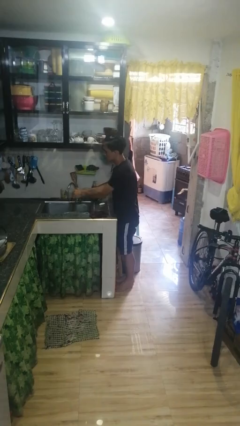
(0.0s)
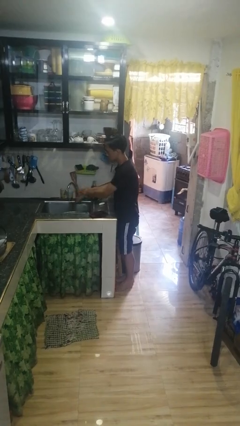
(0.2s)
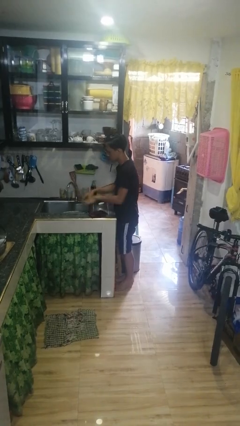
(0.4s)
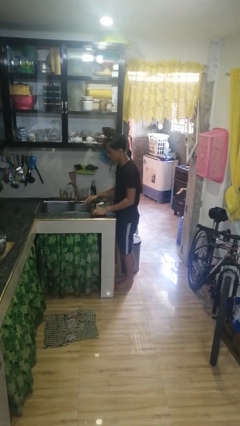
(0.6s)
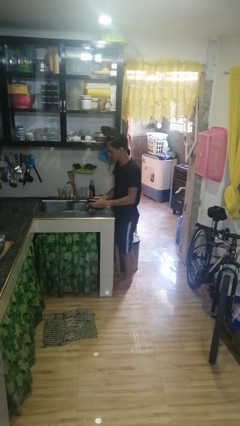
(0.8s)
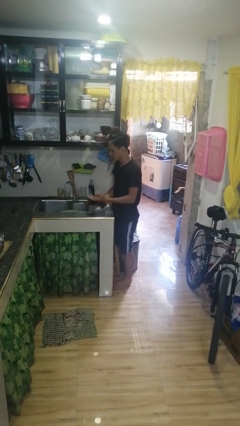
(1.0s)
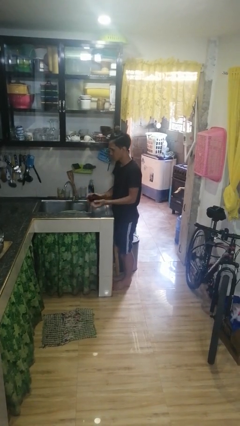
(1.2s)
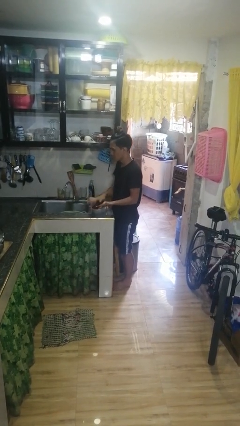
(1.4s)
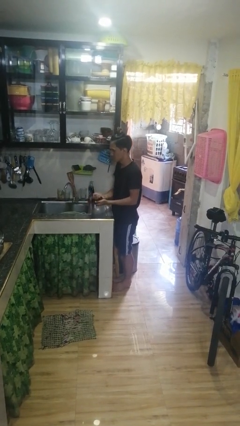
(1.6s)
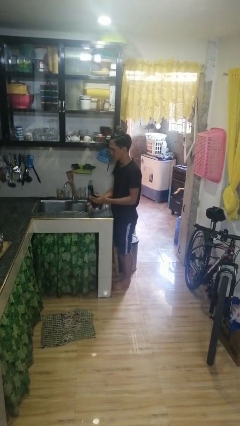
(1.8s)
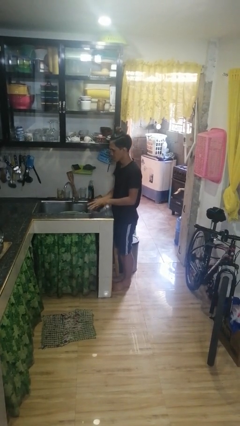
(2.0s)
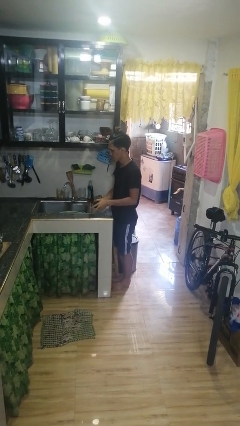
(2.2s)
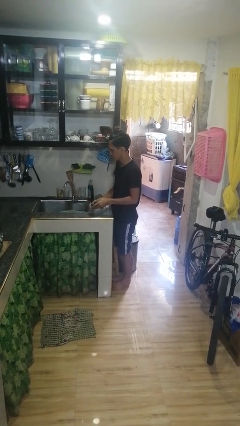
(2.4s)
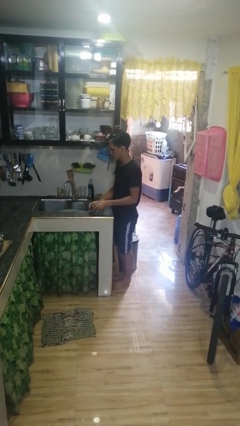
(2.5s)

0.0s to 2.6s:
person dries hands with towel

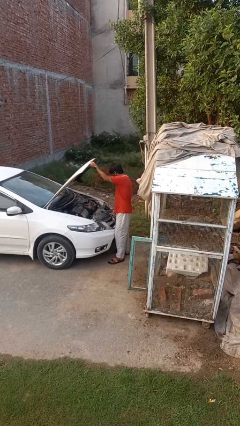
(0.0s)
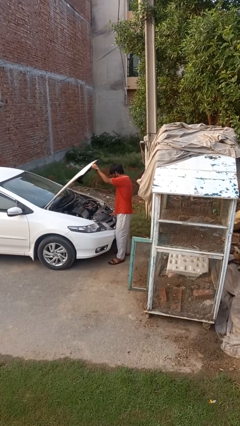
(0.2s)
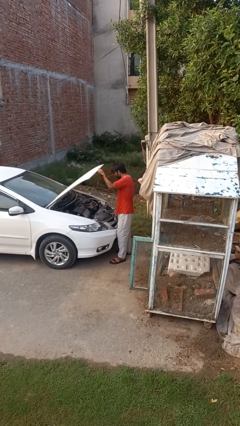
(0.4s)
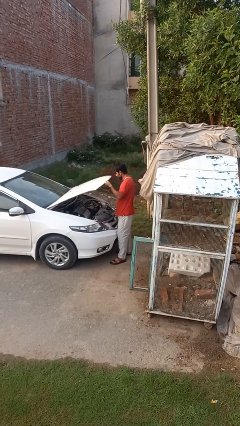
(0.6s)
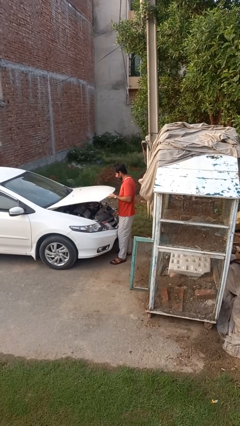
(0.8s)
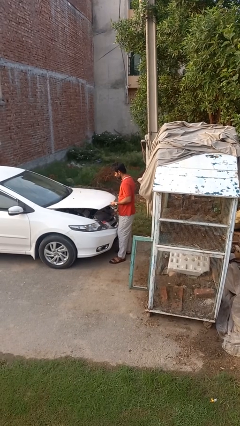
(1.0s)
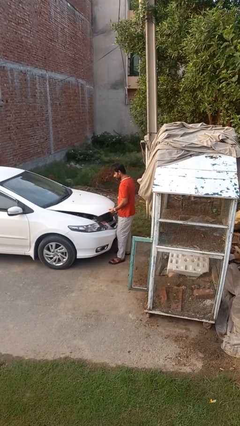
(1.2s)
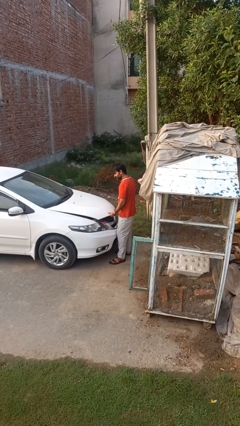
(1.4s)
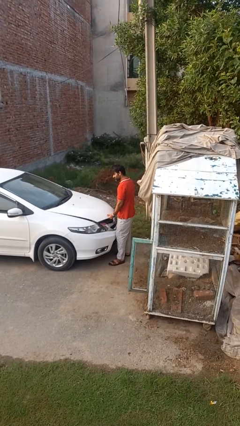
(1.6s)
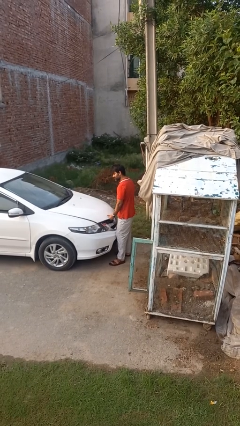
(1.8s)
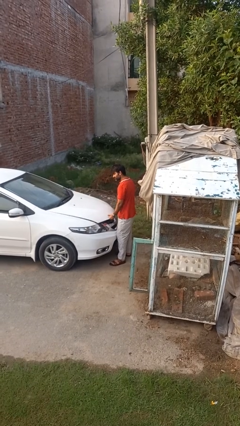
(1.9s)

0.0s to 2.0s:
person closes car hood

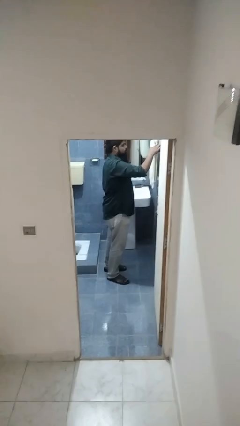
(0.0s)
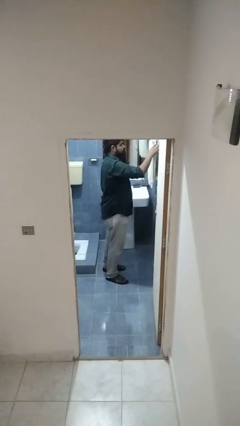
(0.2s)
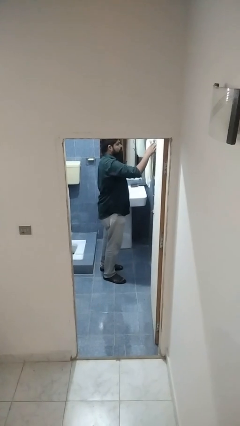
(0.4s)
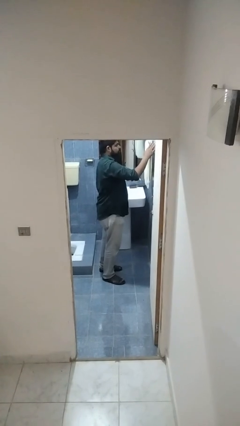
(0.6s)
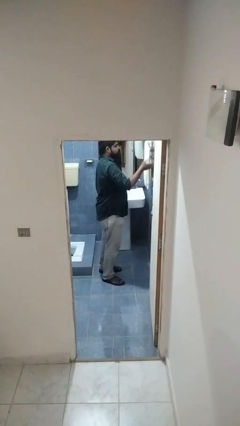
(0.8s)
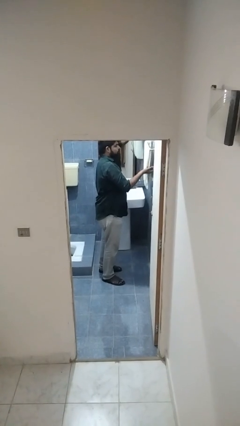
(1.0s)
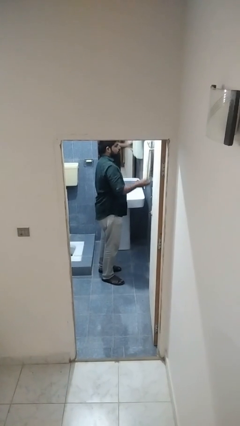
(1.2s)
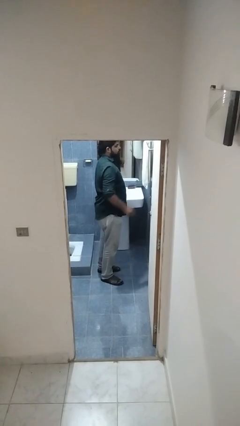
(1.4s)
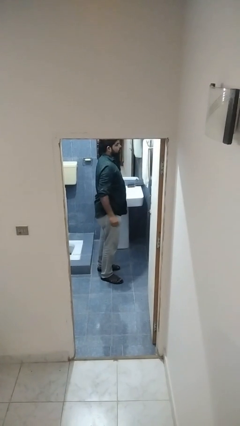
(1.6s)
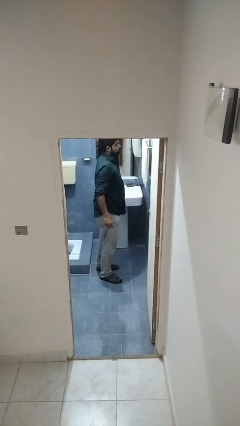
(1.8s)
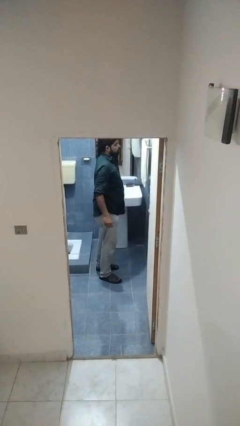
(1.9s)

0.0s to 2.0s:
person picks up object from countertop

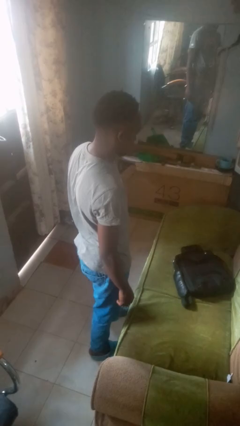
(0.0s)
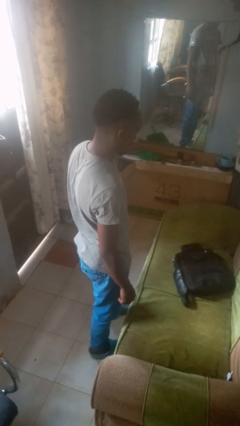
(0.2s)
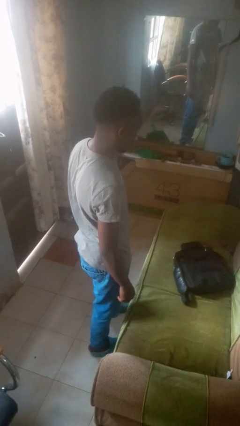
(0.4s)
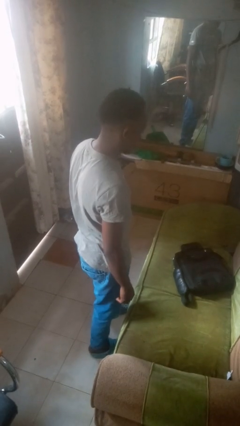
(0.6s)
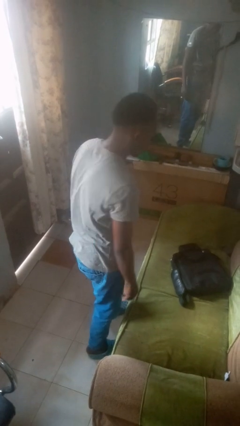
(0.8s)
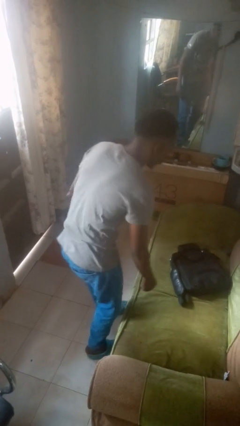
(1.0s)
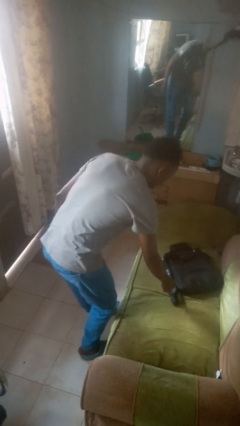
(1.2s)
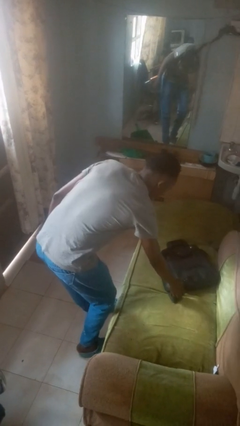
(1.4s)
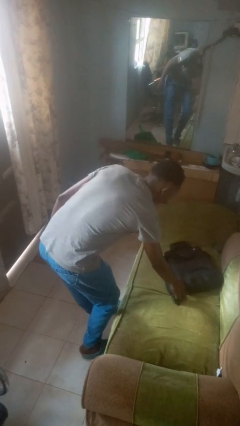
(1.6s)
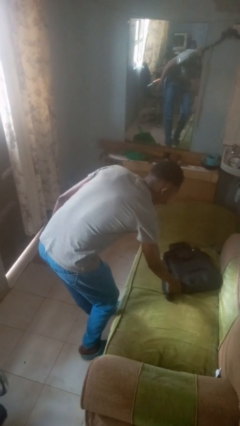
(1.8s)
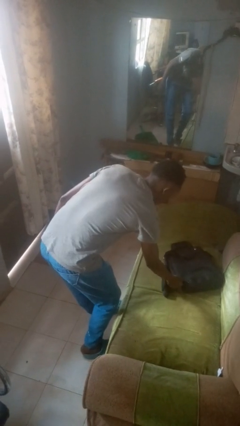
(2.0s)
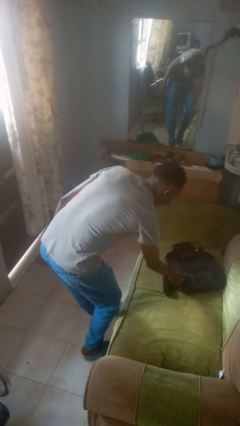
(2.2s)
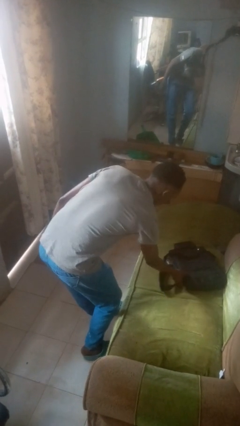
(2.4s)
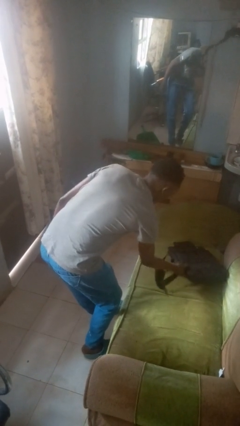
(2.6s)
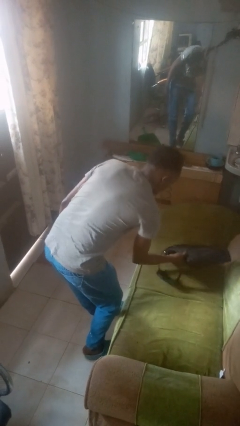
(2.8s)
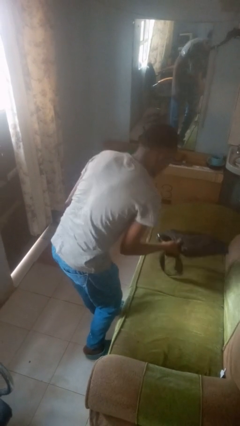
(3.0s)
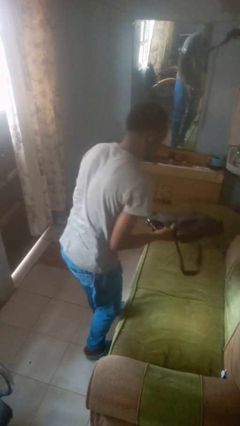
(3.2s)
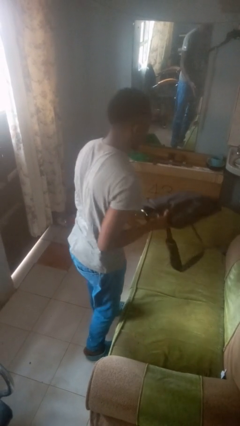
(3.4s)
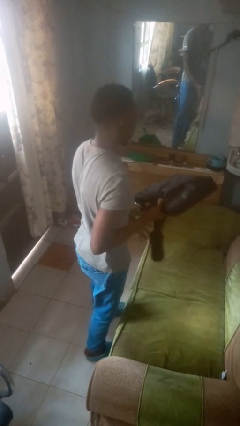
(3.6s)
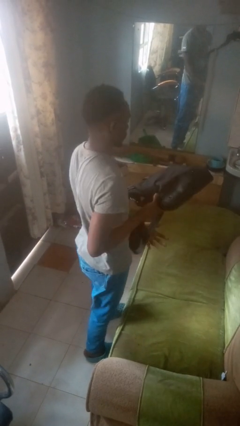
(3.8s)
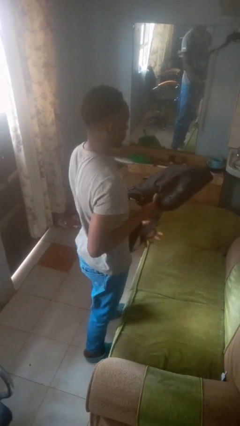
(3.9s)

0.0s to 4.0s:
person picks up object from couch

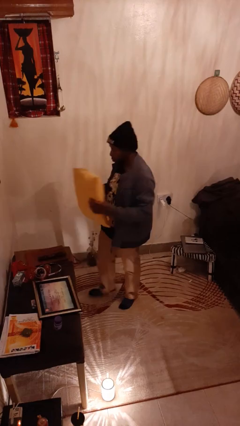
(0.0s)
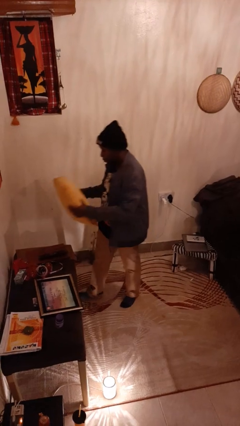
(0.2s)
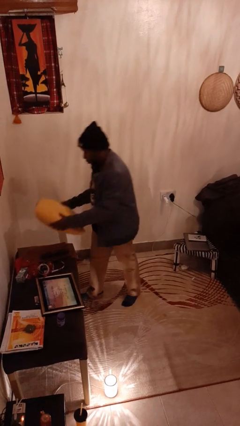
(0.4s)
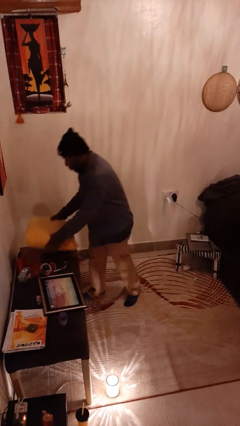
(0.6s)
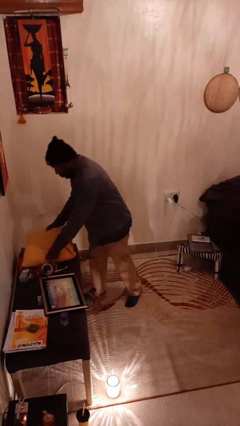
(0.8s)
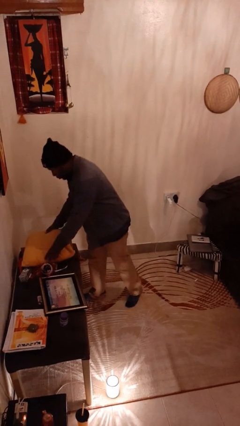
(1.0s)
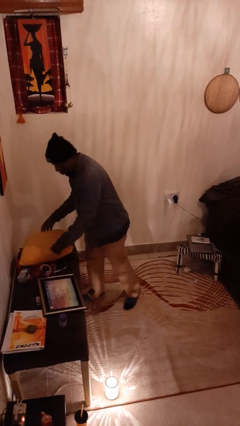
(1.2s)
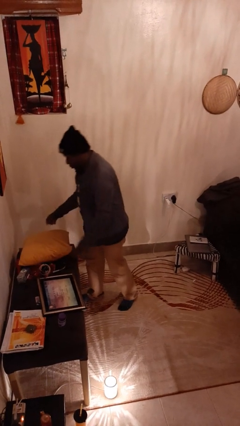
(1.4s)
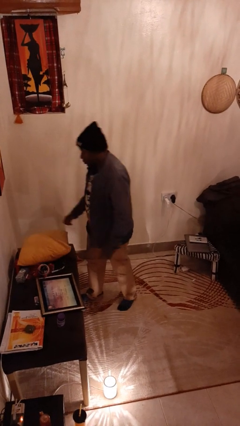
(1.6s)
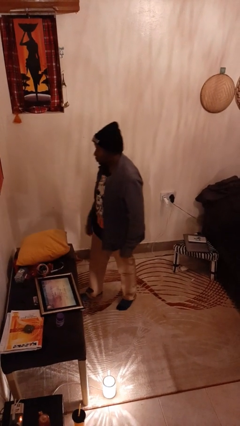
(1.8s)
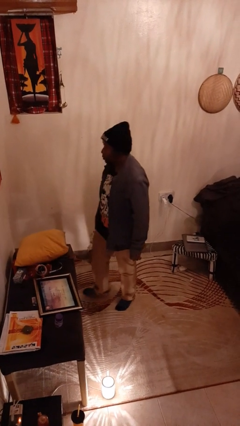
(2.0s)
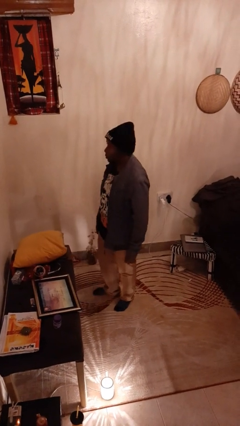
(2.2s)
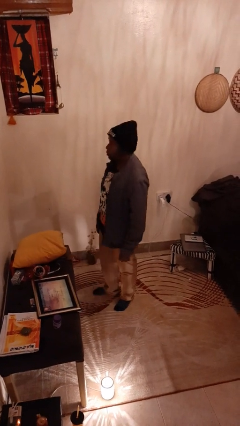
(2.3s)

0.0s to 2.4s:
person puts down object on countertop

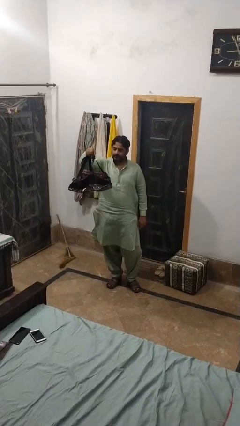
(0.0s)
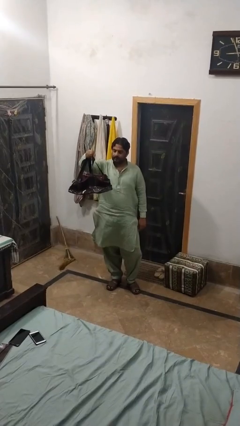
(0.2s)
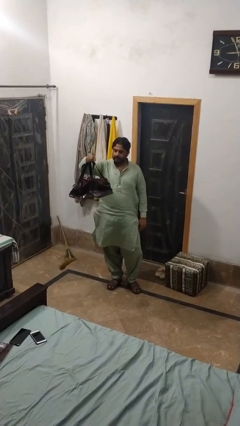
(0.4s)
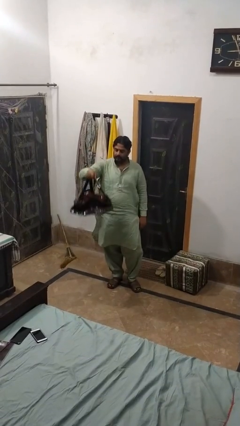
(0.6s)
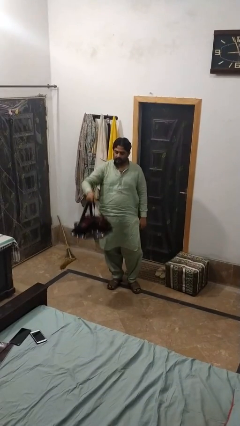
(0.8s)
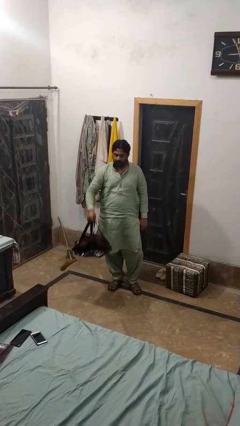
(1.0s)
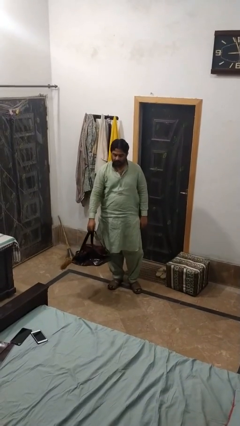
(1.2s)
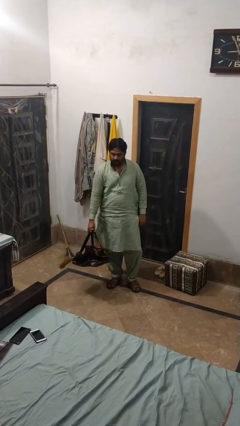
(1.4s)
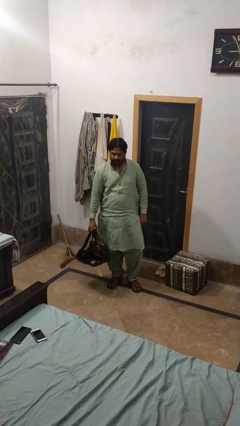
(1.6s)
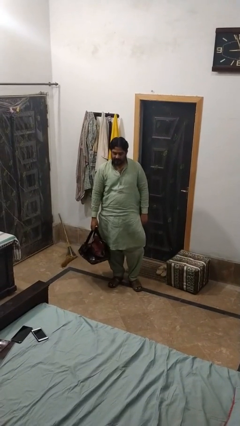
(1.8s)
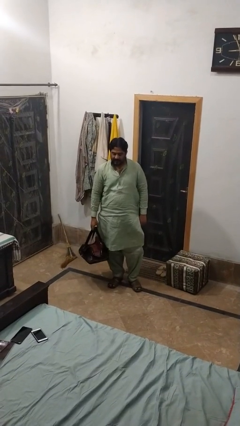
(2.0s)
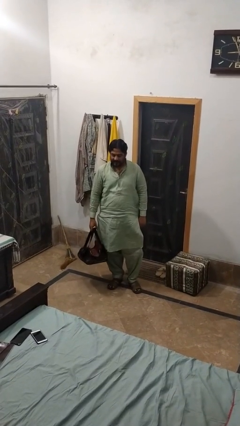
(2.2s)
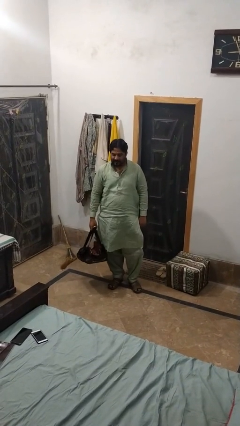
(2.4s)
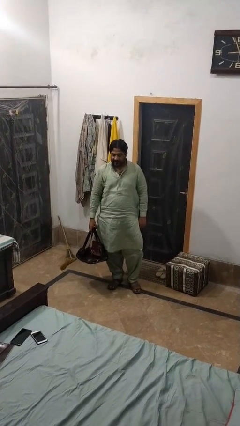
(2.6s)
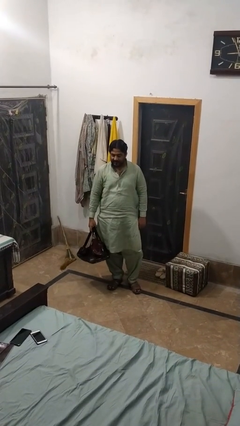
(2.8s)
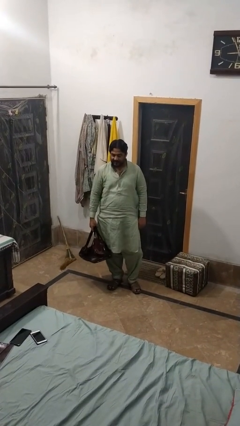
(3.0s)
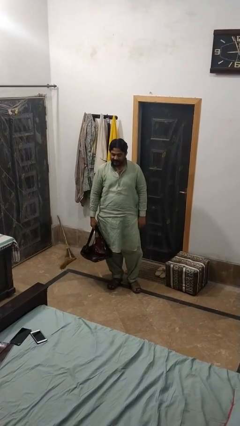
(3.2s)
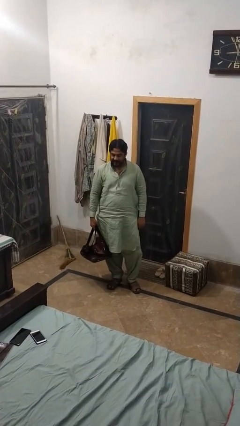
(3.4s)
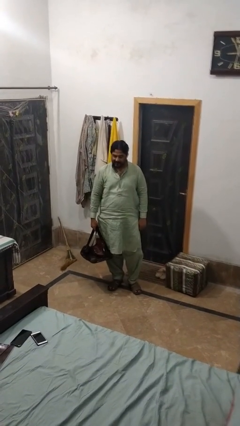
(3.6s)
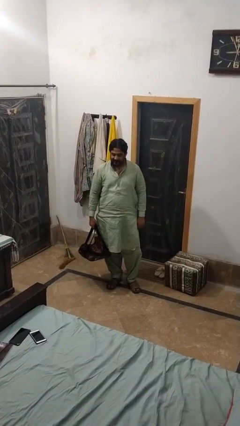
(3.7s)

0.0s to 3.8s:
person takes off backpack

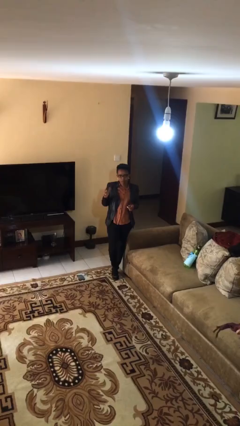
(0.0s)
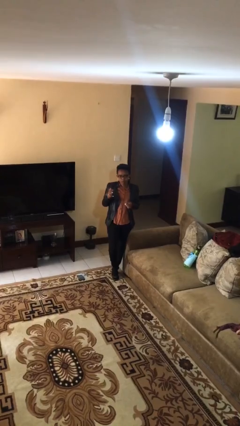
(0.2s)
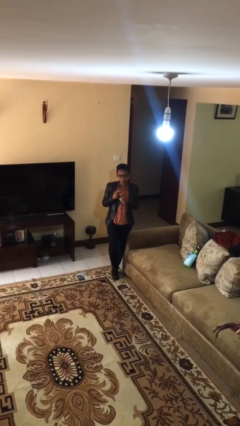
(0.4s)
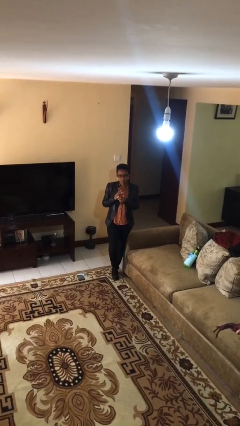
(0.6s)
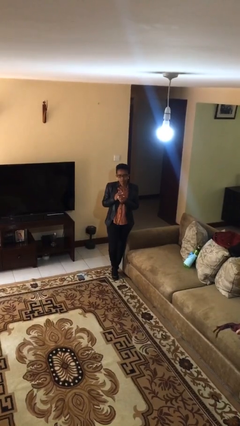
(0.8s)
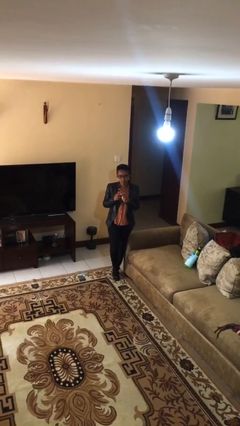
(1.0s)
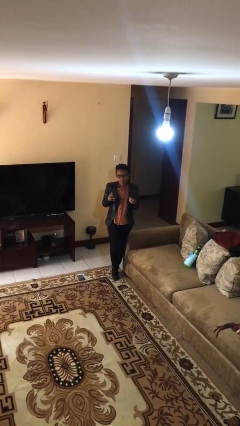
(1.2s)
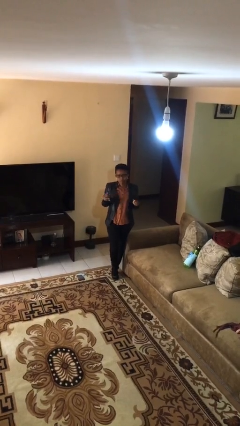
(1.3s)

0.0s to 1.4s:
person takes off ring
